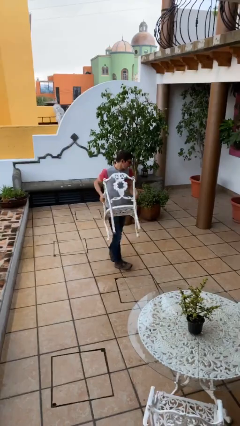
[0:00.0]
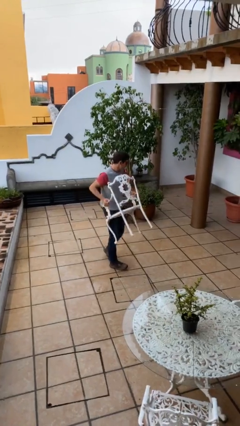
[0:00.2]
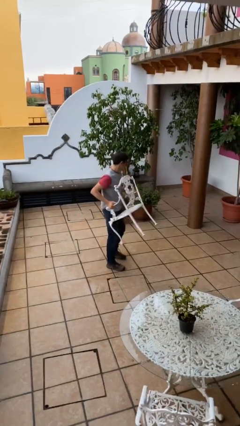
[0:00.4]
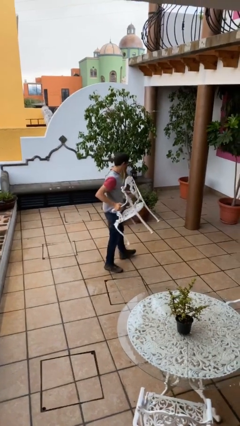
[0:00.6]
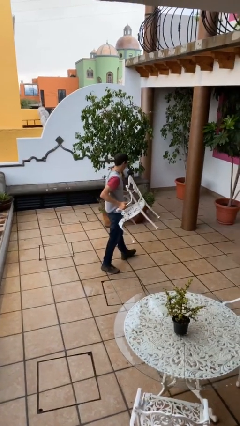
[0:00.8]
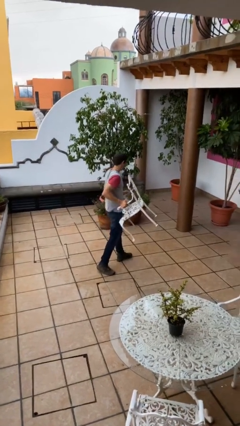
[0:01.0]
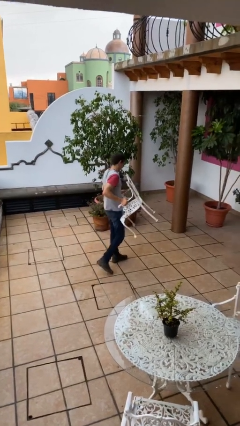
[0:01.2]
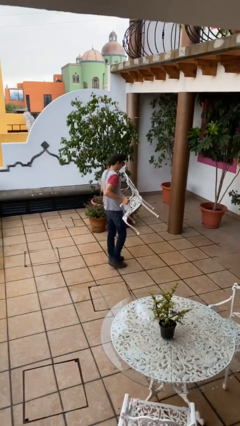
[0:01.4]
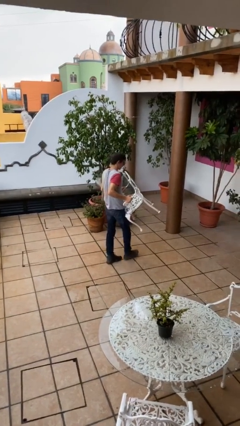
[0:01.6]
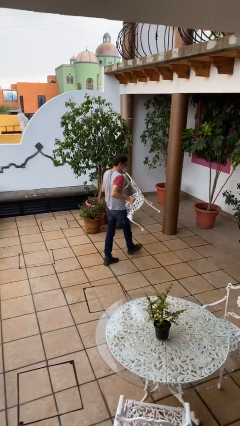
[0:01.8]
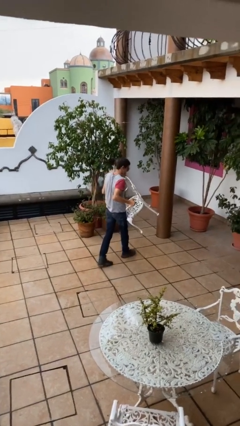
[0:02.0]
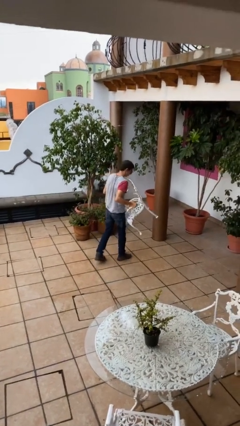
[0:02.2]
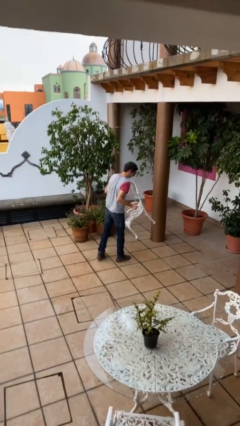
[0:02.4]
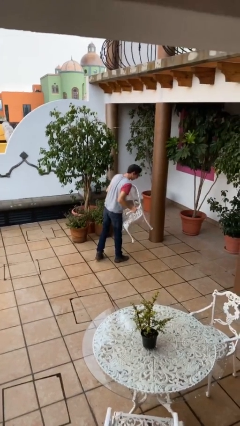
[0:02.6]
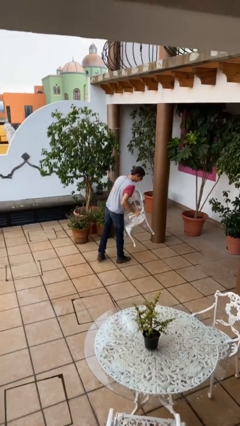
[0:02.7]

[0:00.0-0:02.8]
person carries heavy object

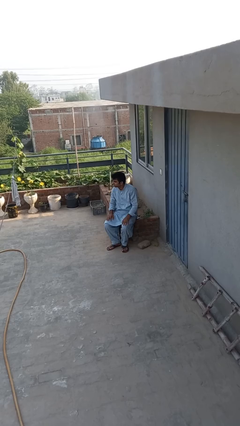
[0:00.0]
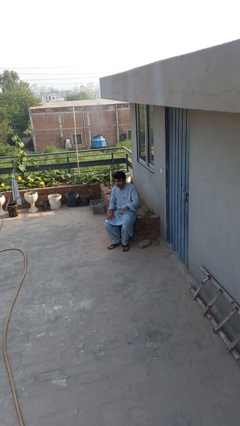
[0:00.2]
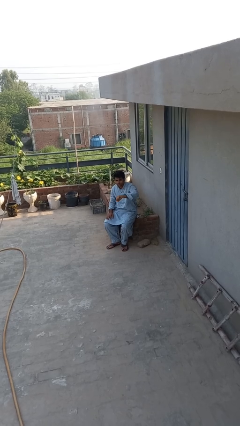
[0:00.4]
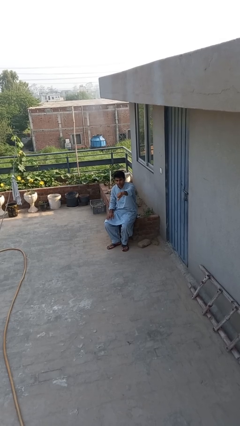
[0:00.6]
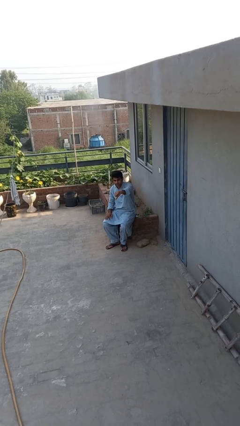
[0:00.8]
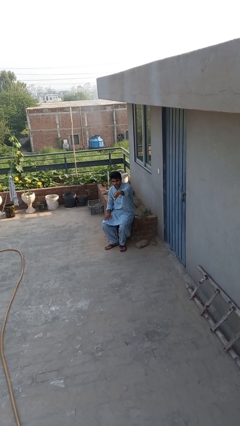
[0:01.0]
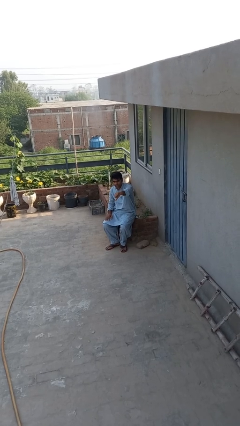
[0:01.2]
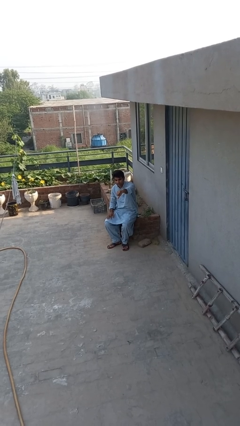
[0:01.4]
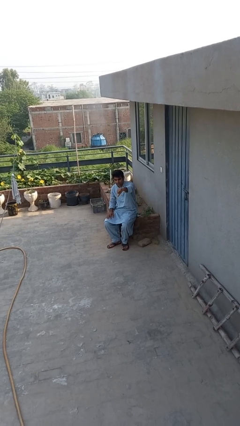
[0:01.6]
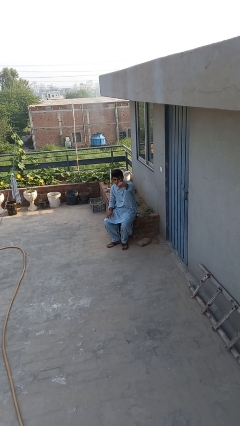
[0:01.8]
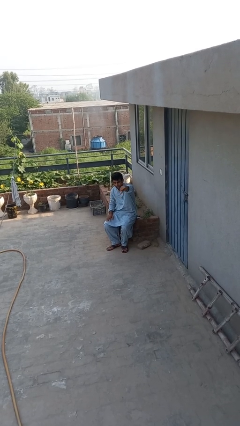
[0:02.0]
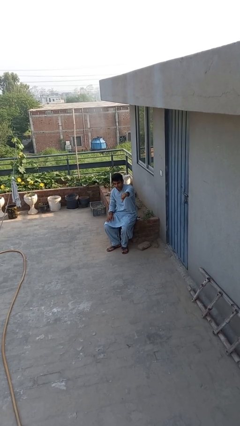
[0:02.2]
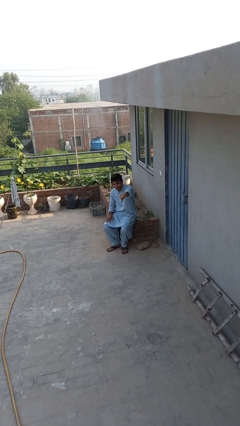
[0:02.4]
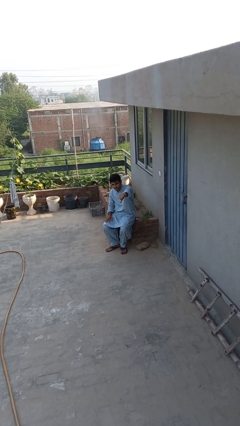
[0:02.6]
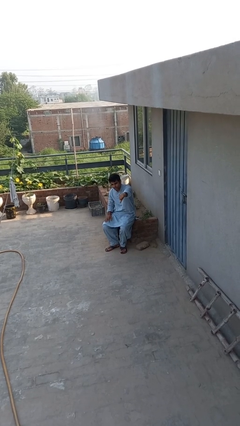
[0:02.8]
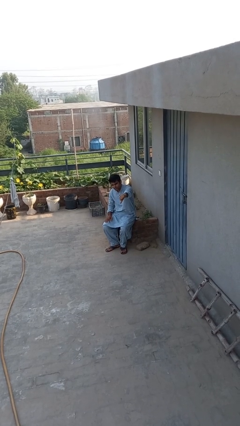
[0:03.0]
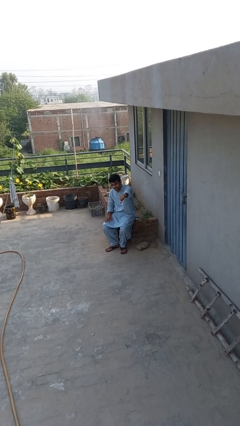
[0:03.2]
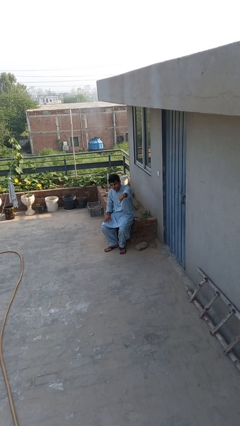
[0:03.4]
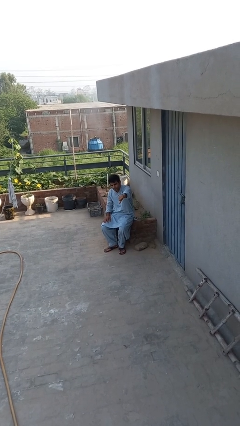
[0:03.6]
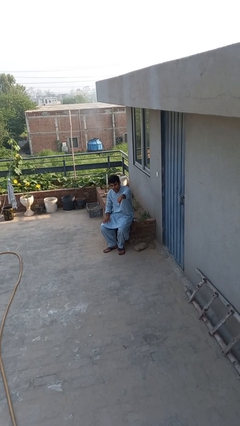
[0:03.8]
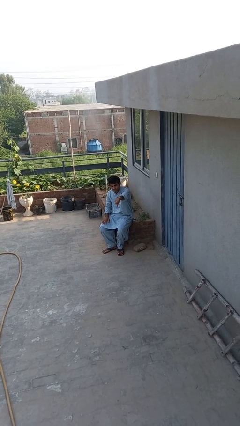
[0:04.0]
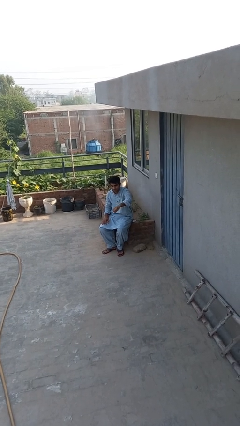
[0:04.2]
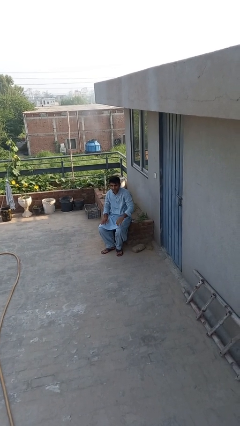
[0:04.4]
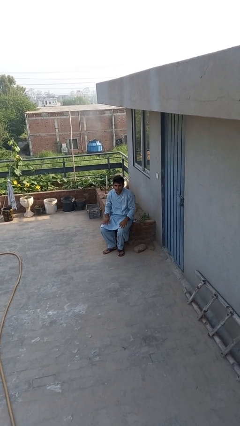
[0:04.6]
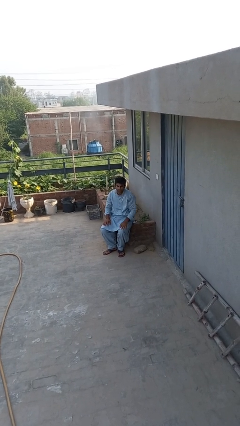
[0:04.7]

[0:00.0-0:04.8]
person gestures thumbs down

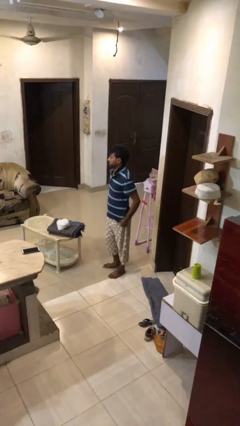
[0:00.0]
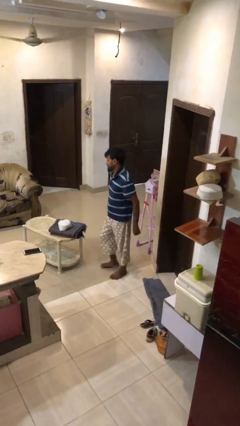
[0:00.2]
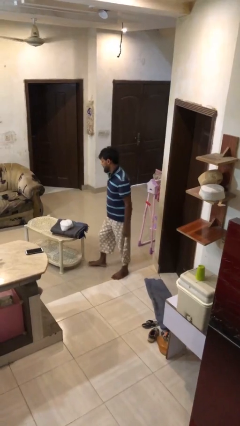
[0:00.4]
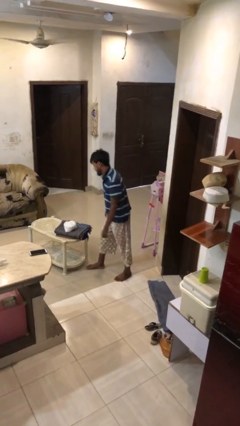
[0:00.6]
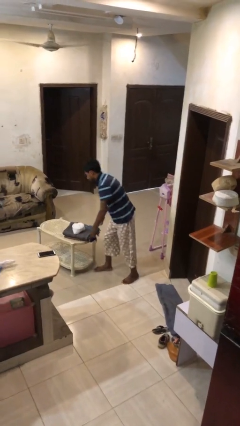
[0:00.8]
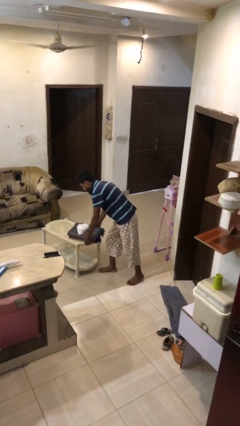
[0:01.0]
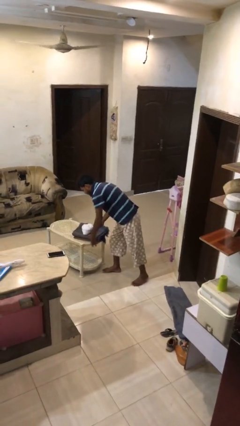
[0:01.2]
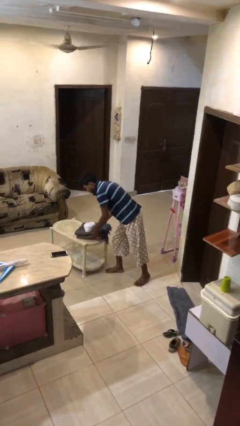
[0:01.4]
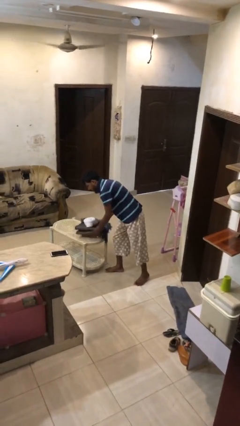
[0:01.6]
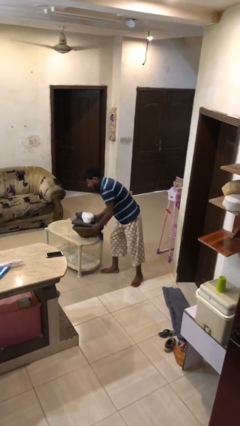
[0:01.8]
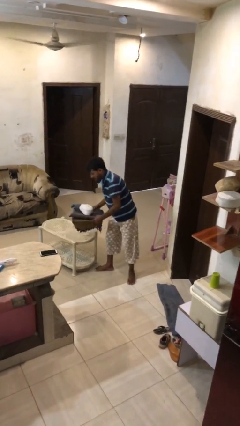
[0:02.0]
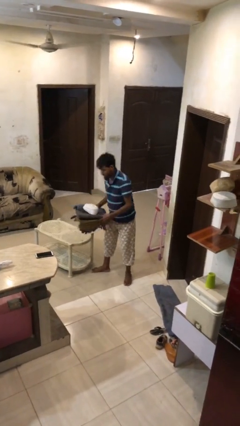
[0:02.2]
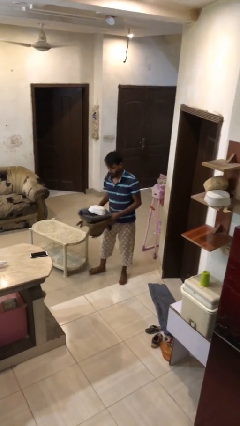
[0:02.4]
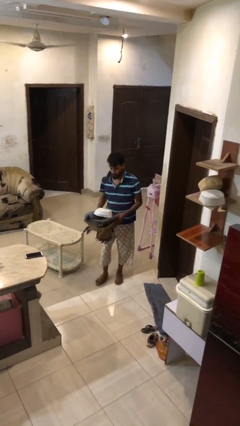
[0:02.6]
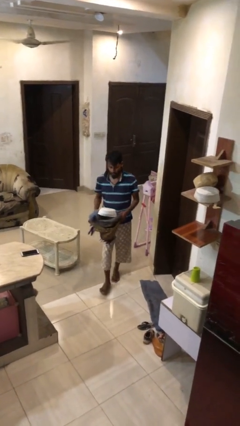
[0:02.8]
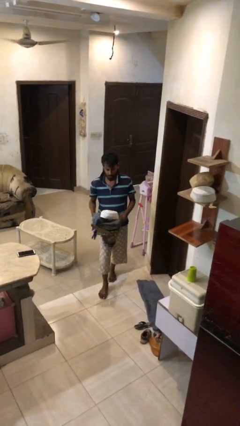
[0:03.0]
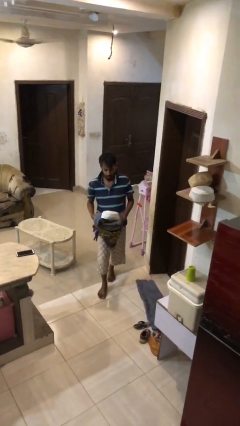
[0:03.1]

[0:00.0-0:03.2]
person picks up object from table

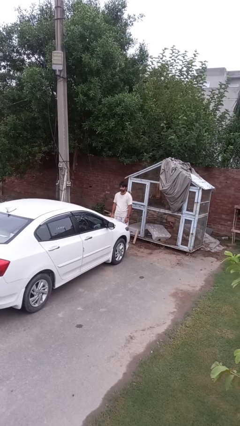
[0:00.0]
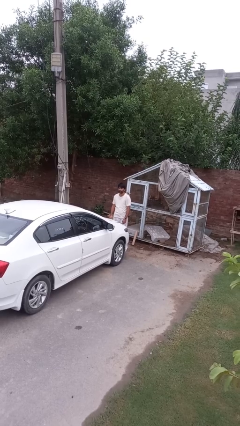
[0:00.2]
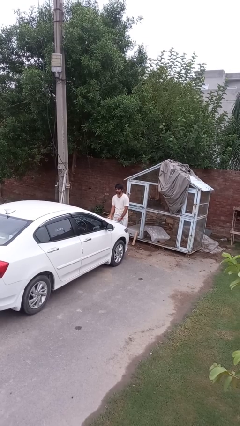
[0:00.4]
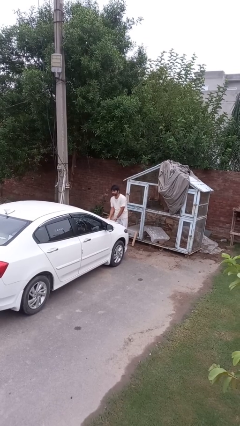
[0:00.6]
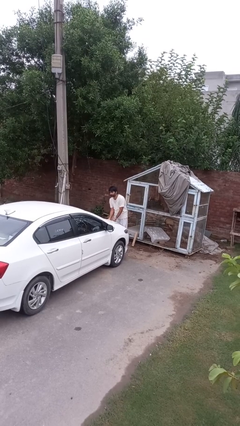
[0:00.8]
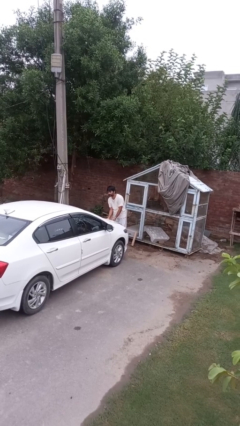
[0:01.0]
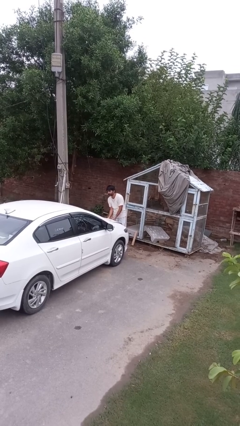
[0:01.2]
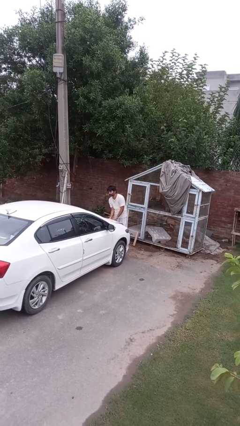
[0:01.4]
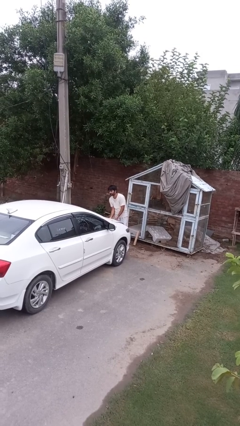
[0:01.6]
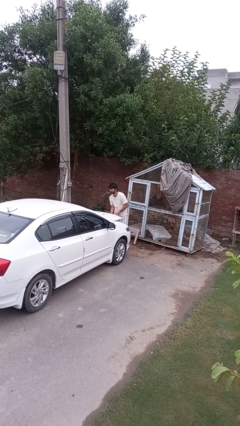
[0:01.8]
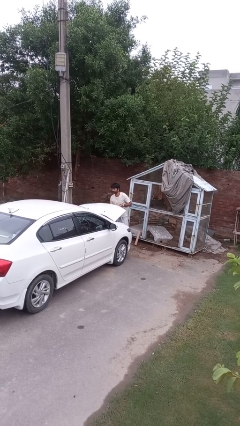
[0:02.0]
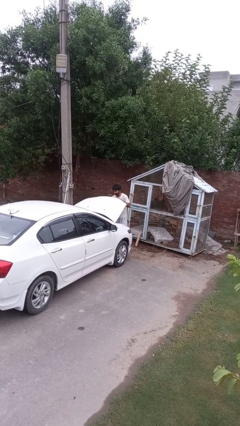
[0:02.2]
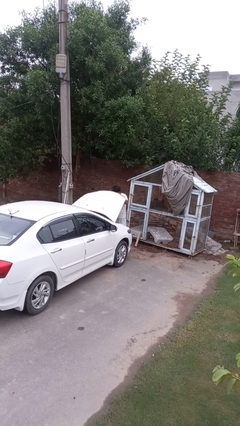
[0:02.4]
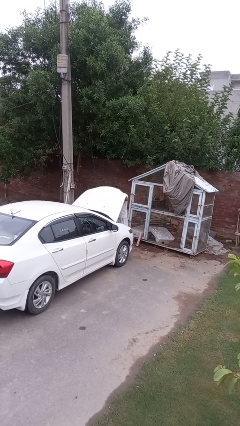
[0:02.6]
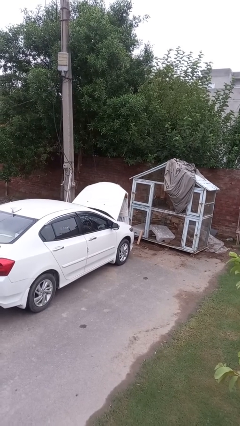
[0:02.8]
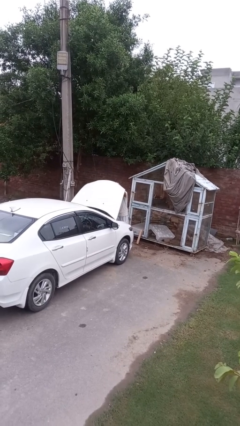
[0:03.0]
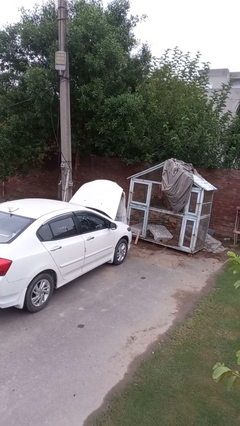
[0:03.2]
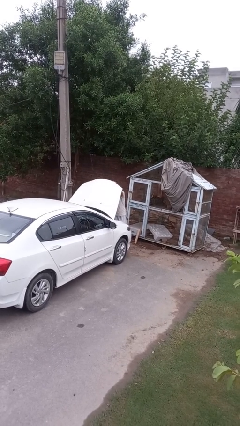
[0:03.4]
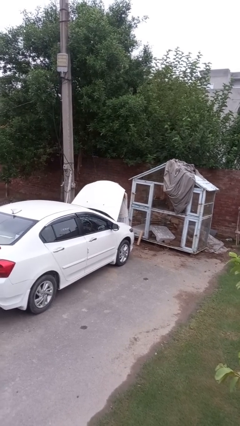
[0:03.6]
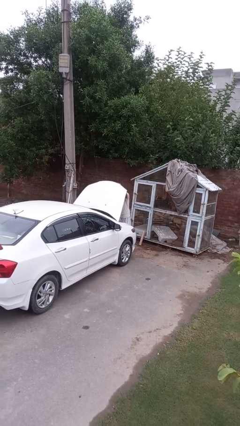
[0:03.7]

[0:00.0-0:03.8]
person opens car hood

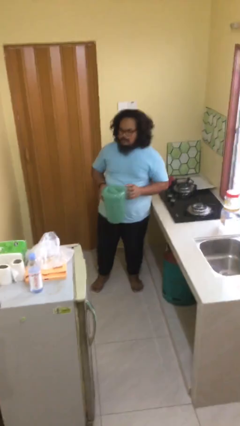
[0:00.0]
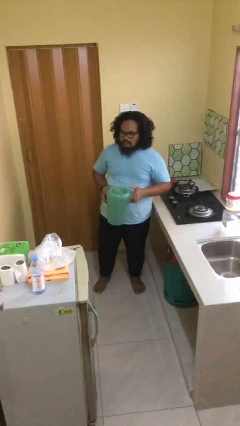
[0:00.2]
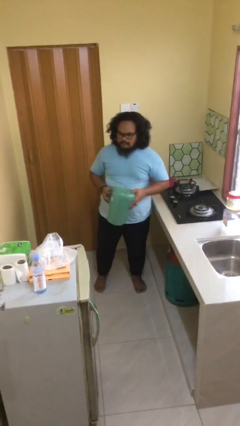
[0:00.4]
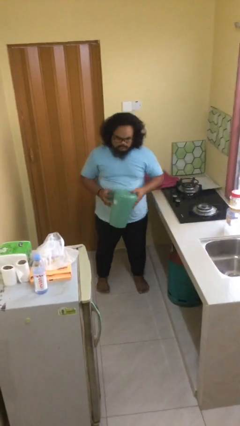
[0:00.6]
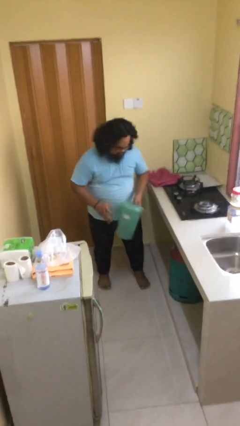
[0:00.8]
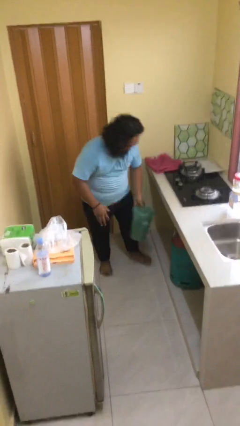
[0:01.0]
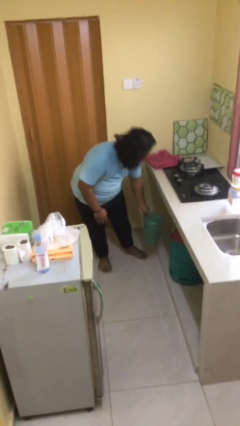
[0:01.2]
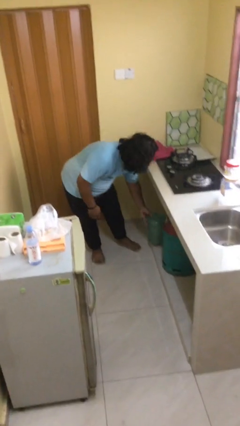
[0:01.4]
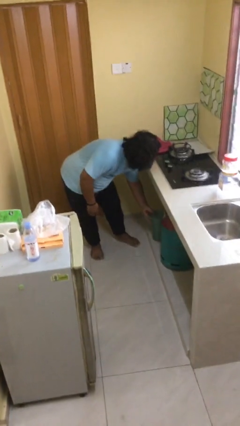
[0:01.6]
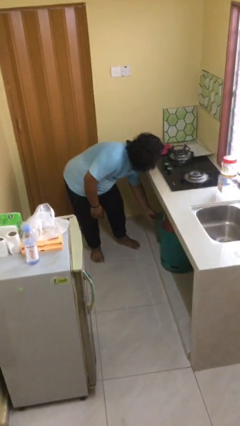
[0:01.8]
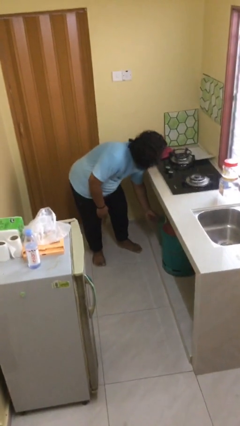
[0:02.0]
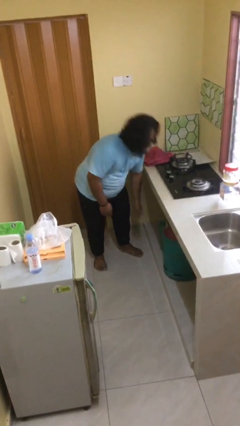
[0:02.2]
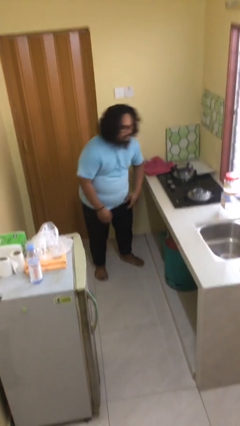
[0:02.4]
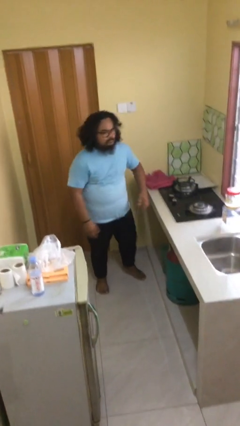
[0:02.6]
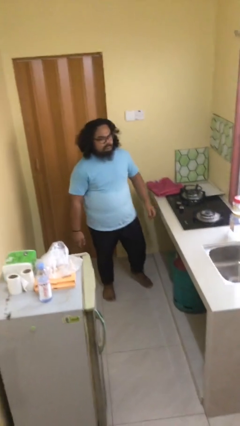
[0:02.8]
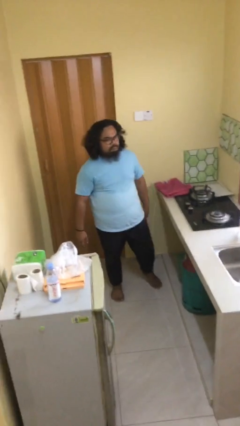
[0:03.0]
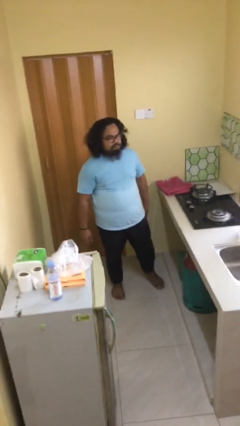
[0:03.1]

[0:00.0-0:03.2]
person puts down object into cabinet
